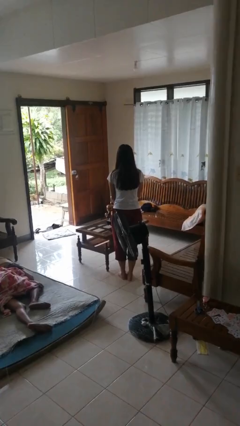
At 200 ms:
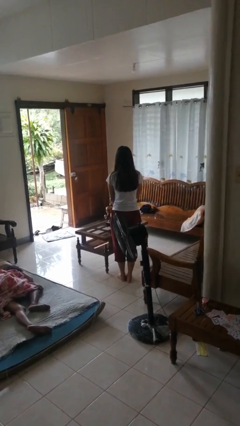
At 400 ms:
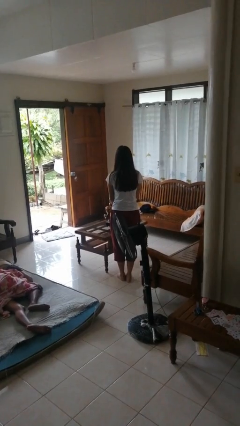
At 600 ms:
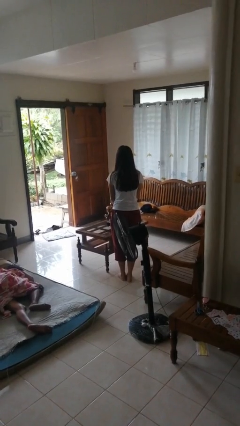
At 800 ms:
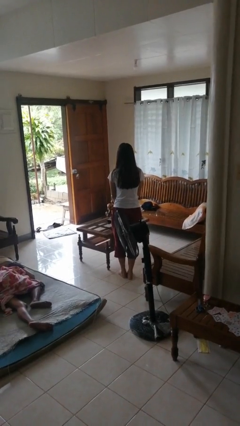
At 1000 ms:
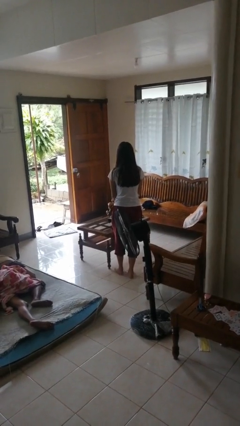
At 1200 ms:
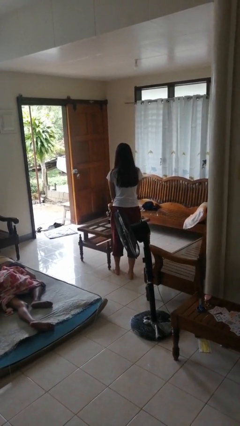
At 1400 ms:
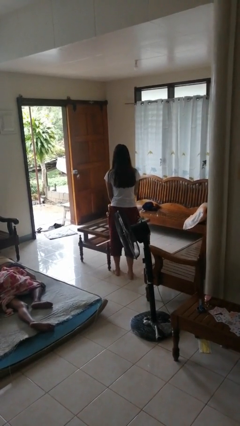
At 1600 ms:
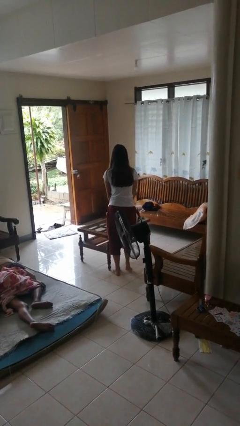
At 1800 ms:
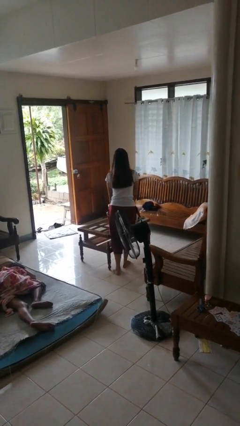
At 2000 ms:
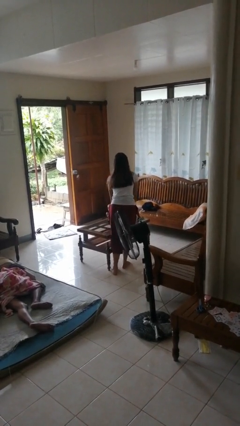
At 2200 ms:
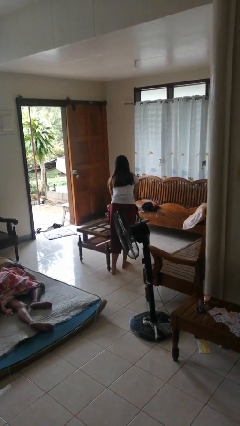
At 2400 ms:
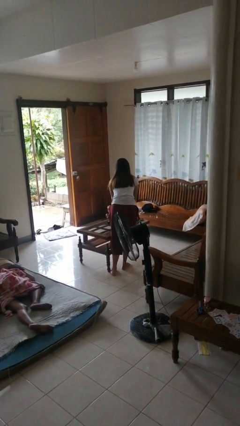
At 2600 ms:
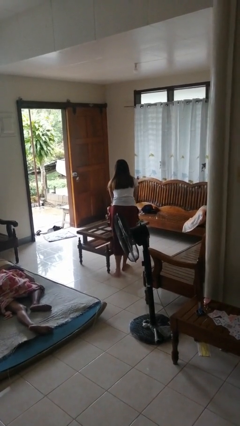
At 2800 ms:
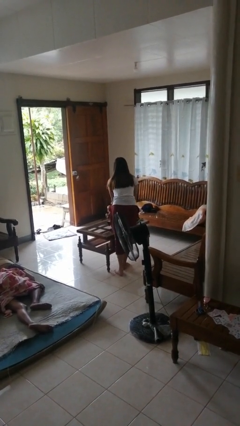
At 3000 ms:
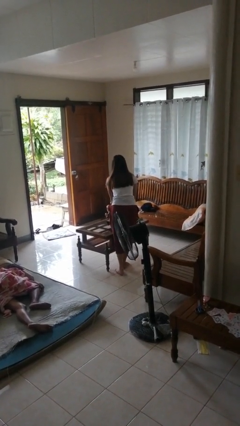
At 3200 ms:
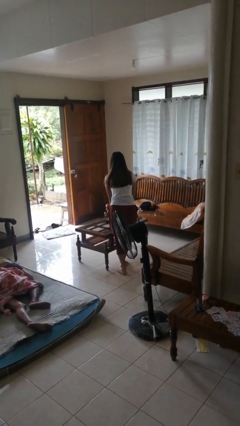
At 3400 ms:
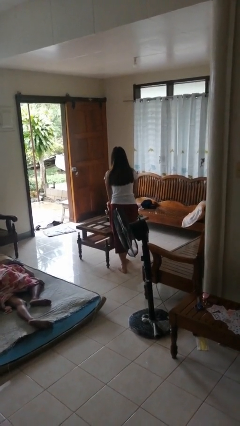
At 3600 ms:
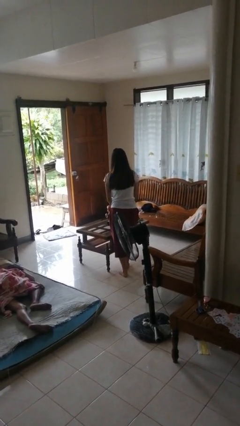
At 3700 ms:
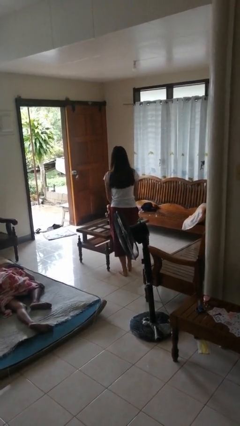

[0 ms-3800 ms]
person bumps into table

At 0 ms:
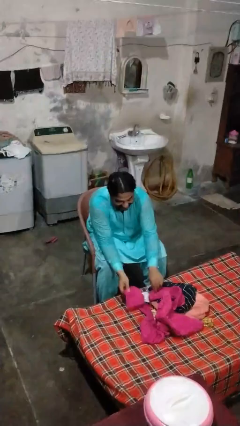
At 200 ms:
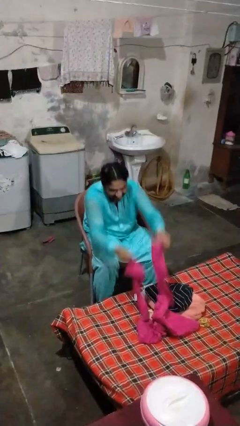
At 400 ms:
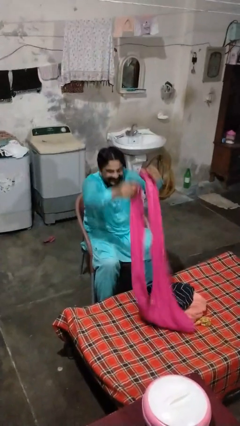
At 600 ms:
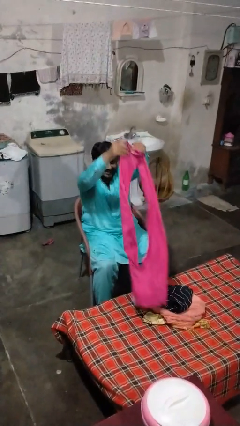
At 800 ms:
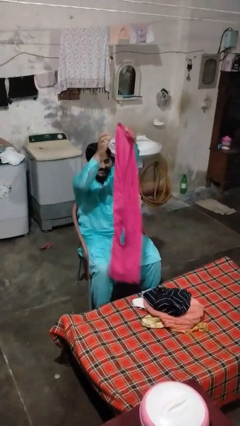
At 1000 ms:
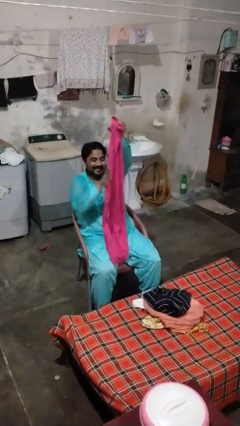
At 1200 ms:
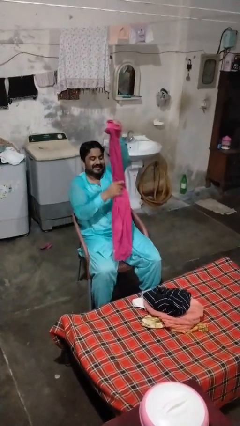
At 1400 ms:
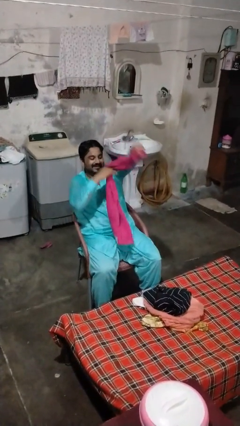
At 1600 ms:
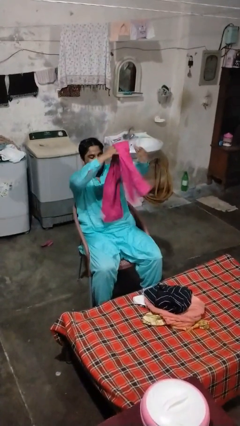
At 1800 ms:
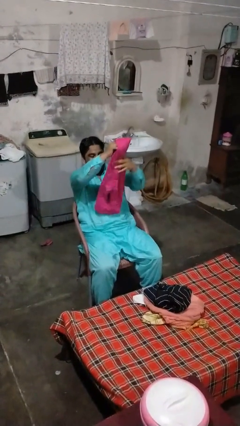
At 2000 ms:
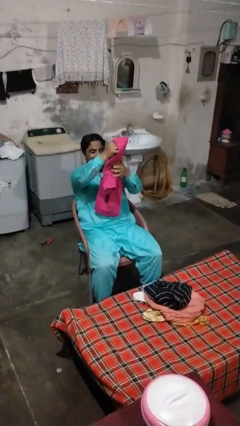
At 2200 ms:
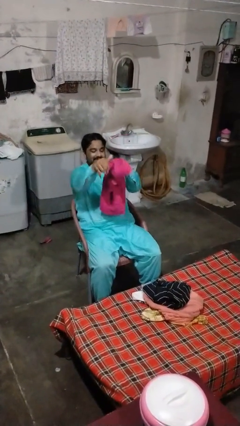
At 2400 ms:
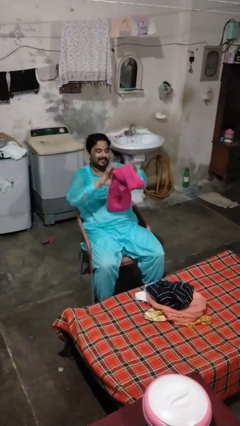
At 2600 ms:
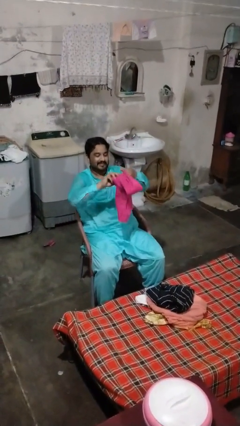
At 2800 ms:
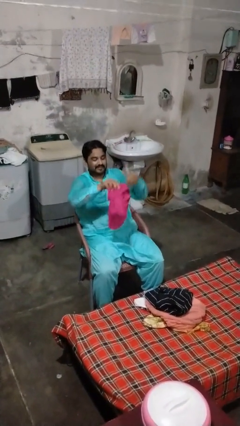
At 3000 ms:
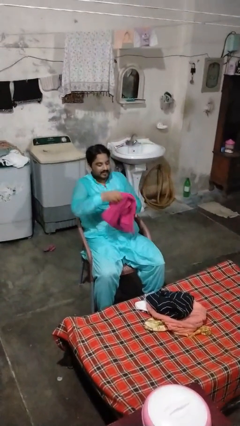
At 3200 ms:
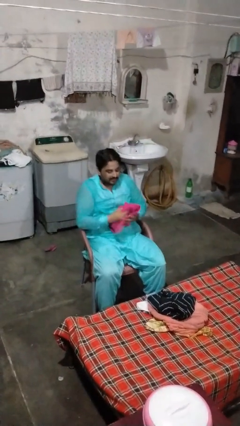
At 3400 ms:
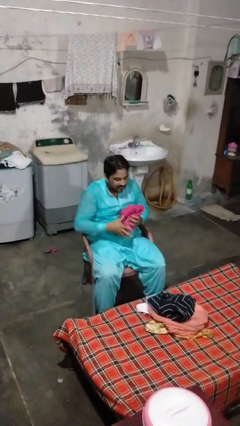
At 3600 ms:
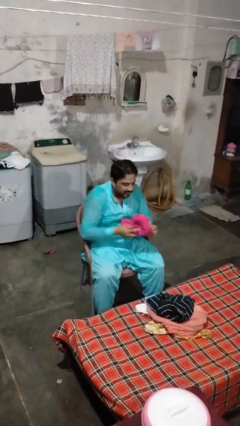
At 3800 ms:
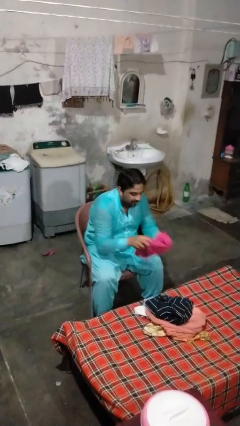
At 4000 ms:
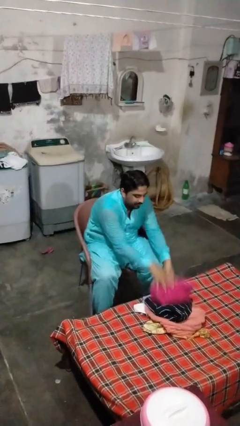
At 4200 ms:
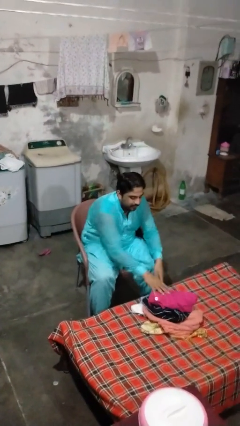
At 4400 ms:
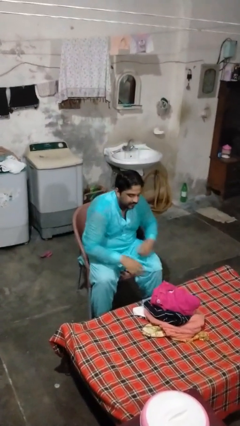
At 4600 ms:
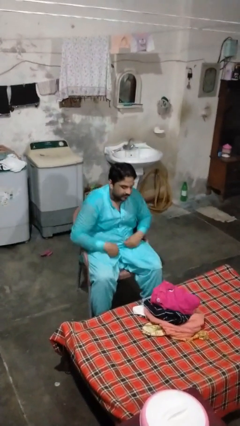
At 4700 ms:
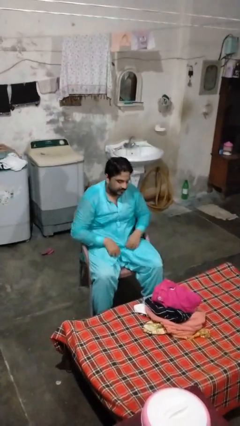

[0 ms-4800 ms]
person folds pants

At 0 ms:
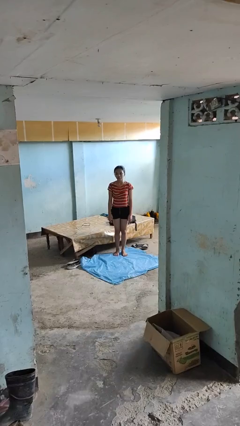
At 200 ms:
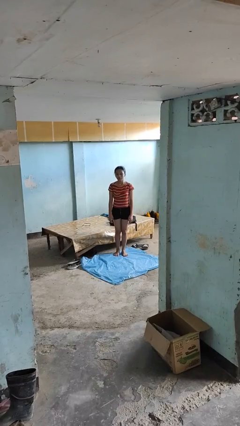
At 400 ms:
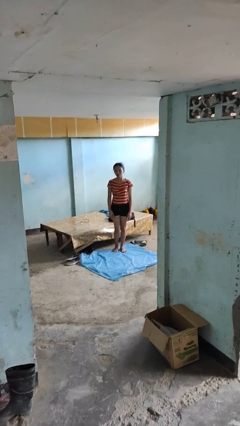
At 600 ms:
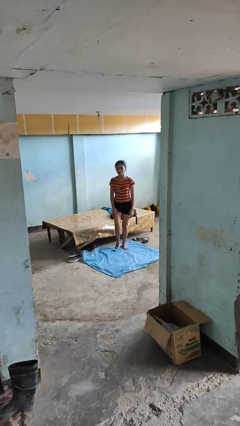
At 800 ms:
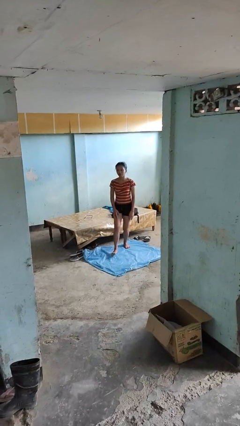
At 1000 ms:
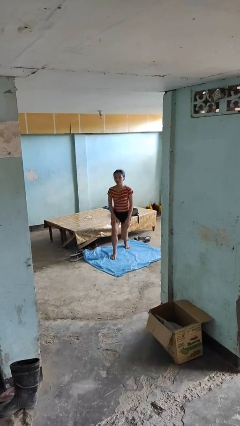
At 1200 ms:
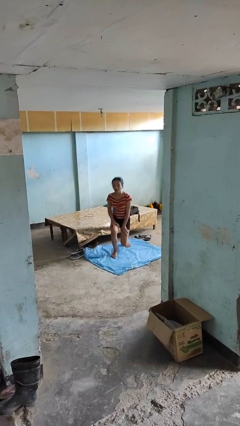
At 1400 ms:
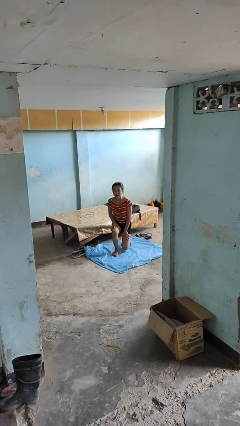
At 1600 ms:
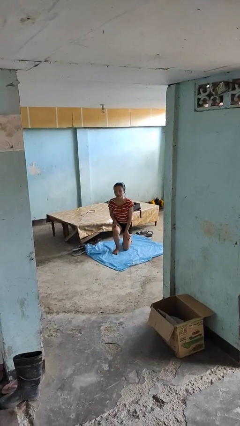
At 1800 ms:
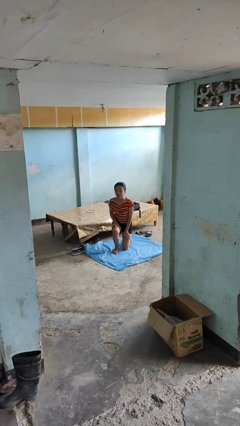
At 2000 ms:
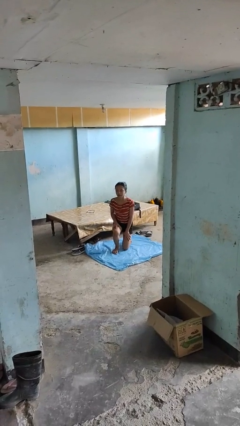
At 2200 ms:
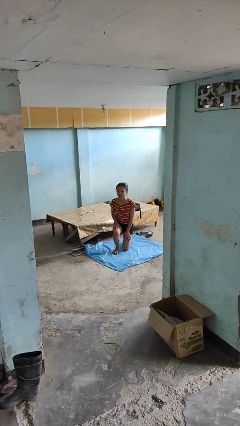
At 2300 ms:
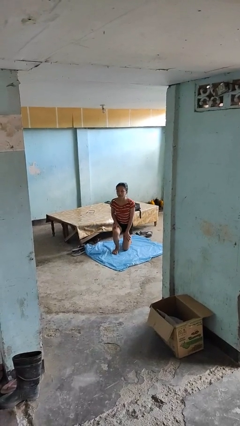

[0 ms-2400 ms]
person kneels

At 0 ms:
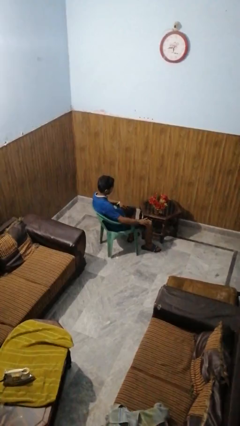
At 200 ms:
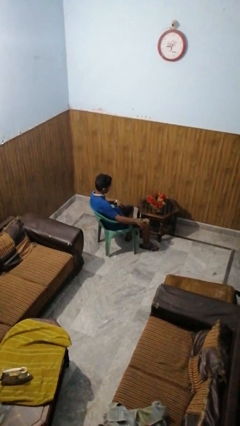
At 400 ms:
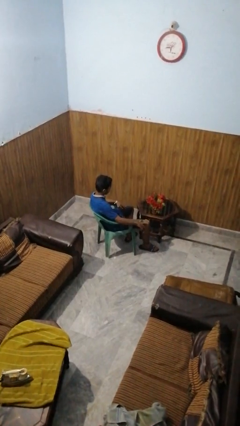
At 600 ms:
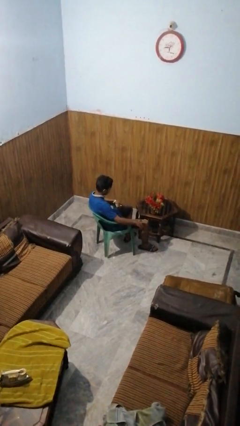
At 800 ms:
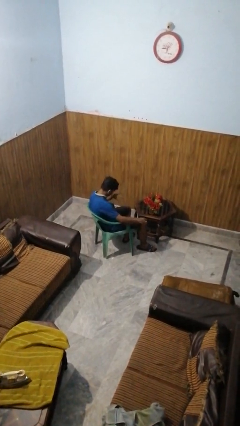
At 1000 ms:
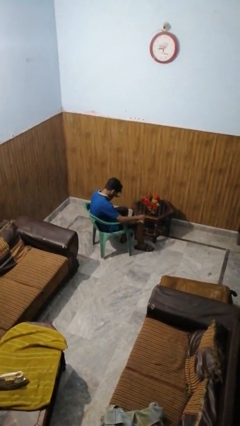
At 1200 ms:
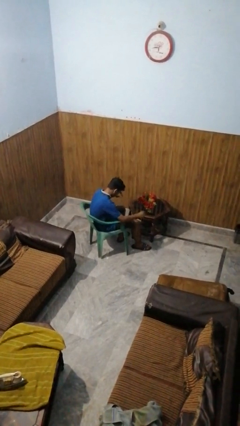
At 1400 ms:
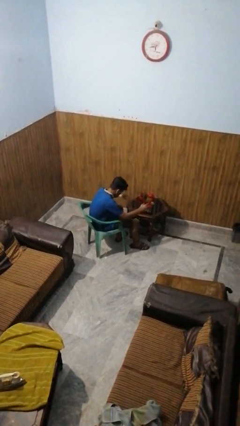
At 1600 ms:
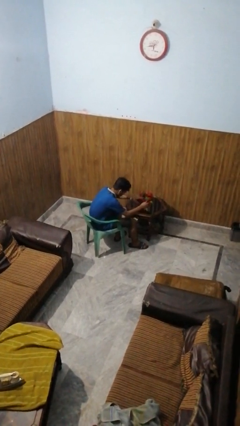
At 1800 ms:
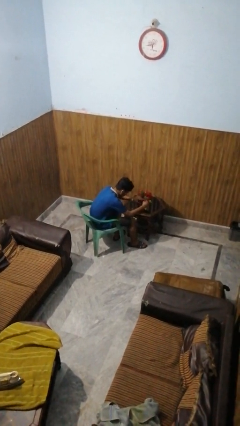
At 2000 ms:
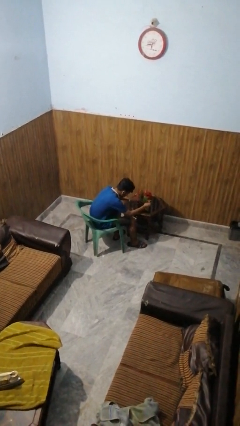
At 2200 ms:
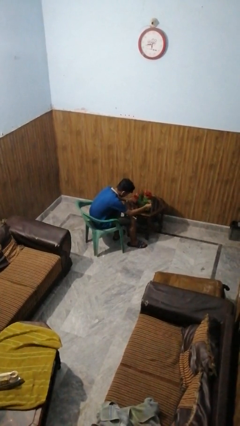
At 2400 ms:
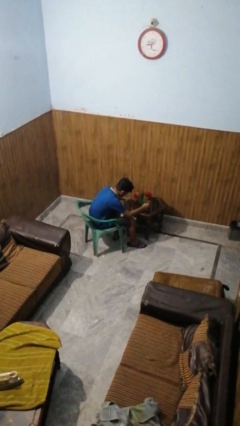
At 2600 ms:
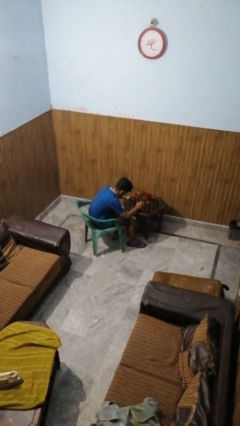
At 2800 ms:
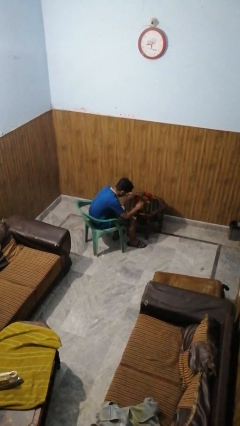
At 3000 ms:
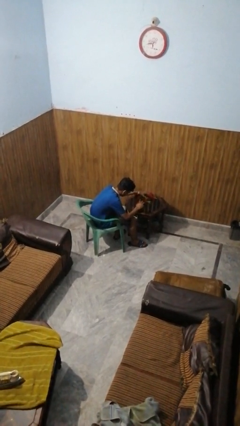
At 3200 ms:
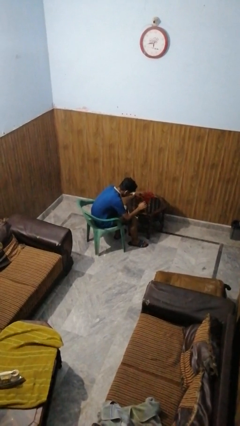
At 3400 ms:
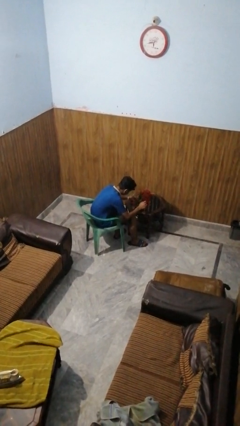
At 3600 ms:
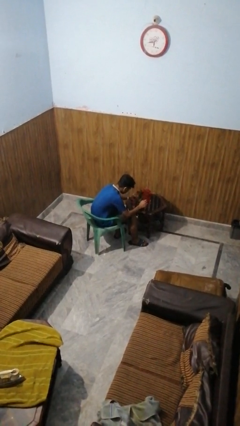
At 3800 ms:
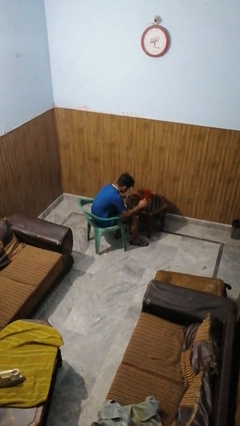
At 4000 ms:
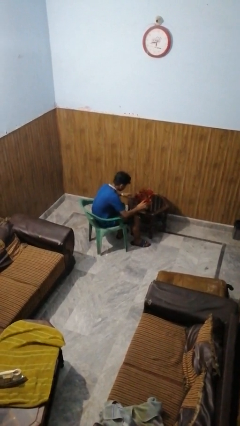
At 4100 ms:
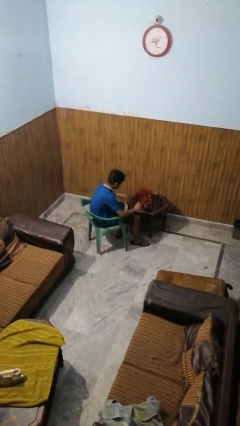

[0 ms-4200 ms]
person arranges flowers in vase

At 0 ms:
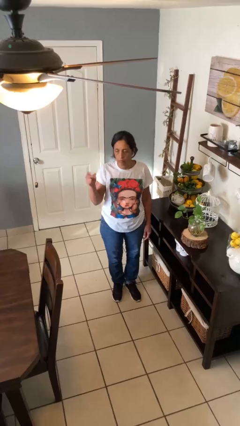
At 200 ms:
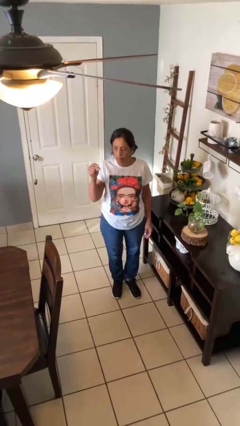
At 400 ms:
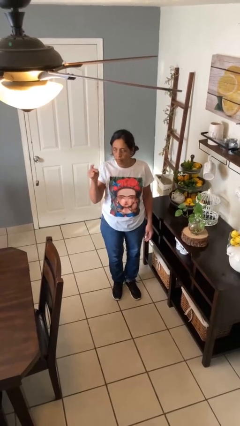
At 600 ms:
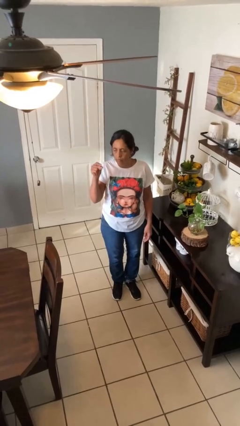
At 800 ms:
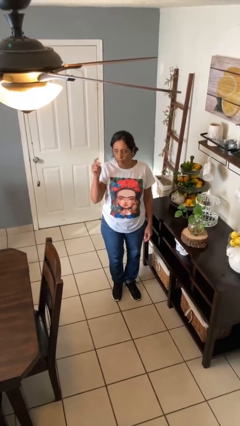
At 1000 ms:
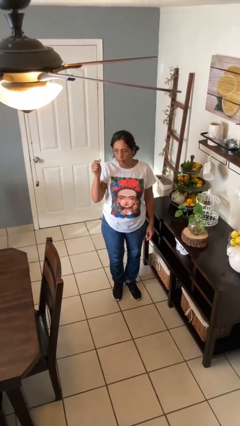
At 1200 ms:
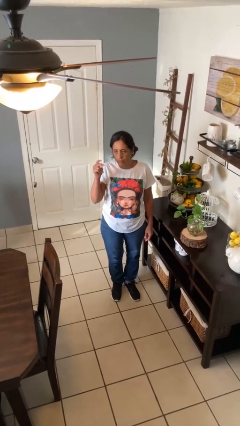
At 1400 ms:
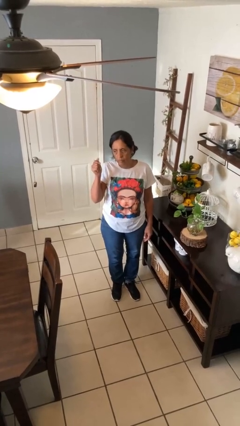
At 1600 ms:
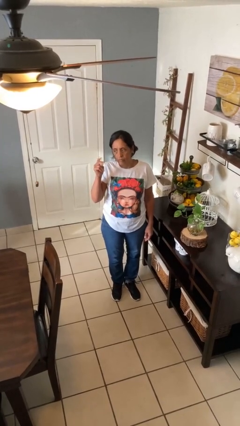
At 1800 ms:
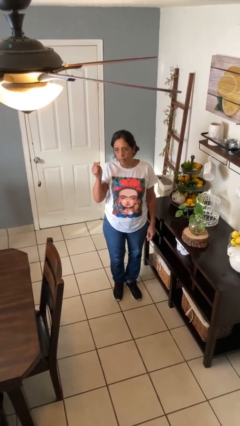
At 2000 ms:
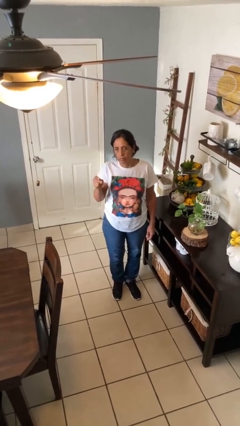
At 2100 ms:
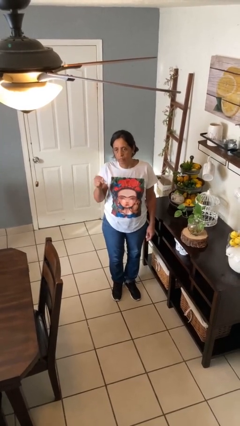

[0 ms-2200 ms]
person snaps fingers
